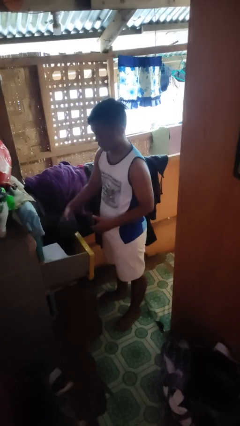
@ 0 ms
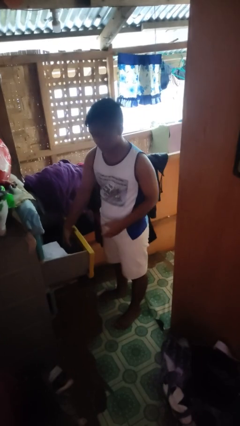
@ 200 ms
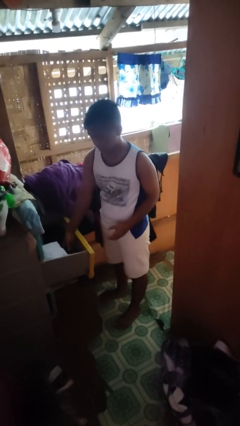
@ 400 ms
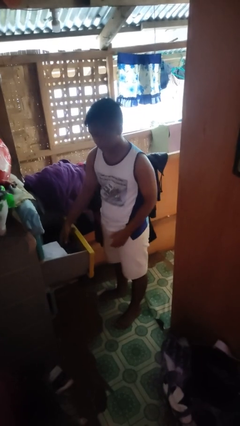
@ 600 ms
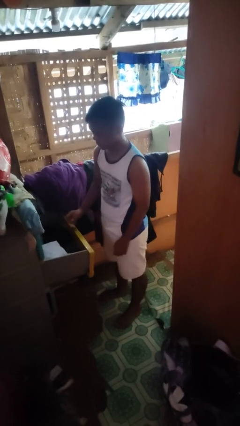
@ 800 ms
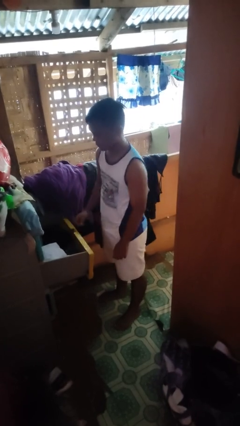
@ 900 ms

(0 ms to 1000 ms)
person puts clothes into dresser

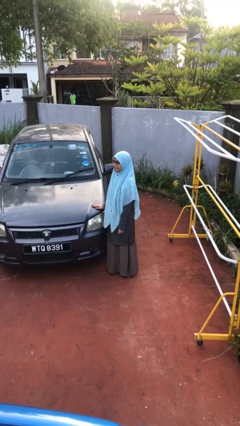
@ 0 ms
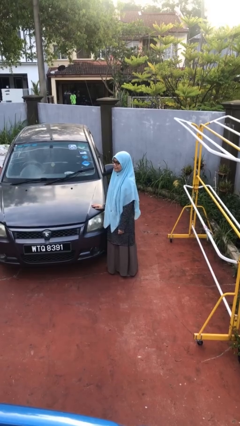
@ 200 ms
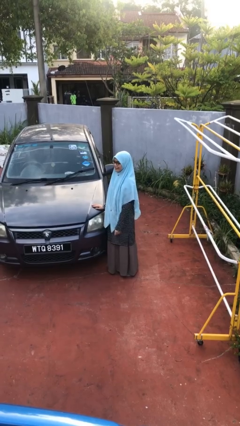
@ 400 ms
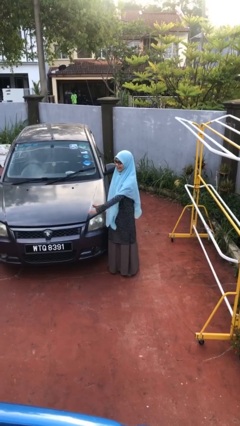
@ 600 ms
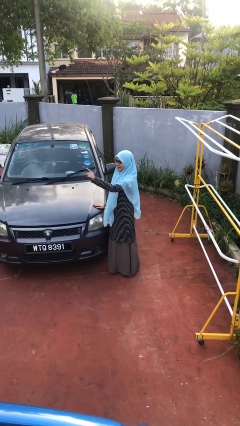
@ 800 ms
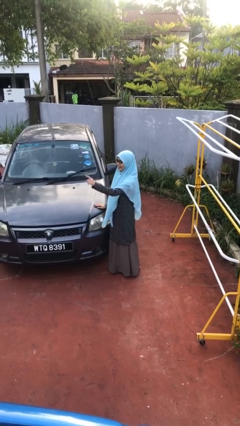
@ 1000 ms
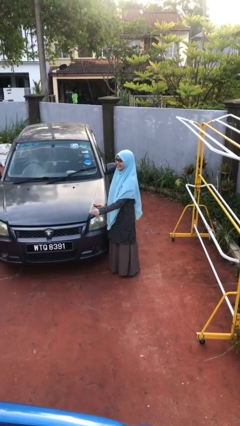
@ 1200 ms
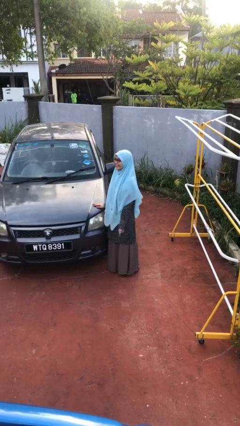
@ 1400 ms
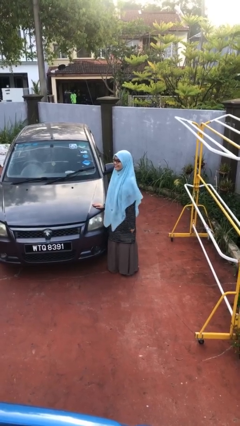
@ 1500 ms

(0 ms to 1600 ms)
person points at person

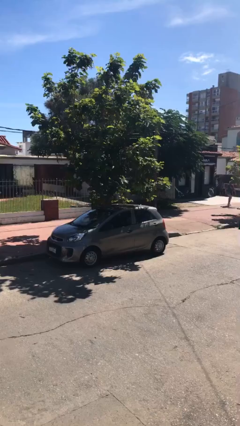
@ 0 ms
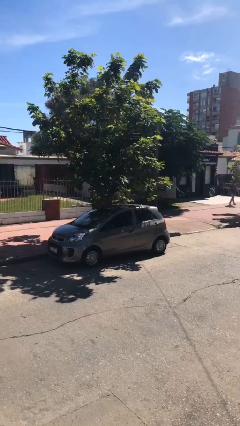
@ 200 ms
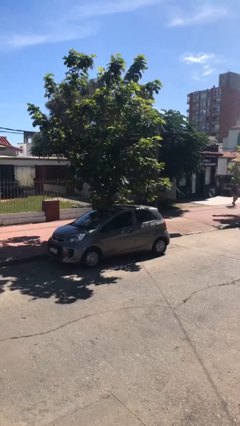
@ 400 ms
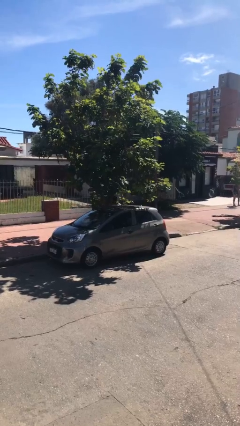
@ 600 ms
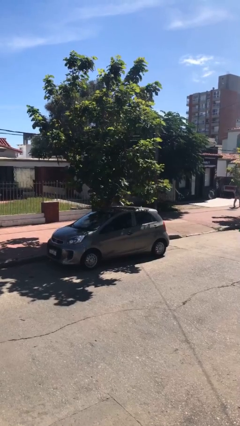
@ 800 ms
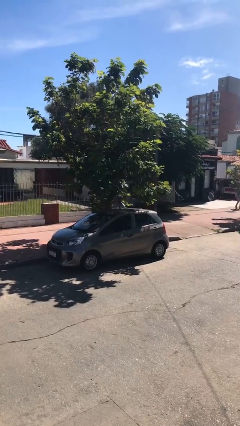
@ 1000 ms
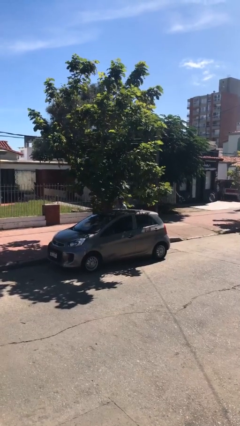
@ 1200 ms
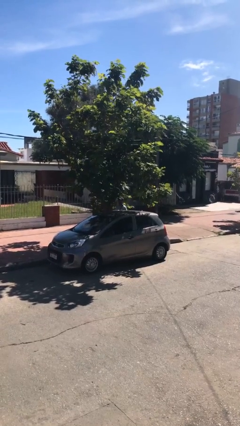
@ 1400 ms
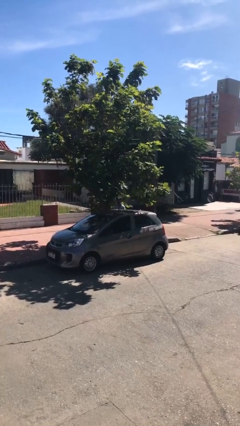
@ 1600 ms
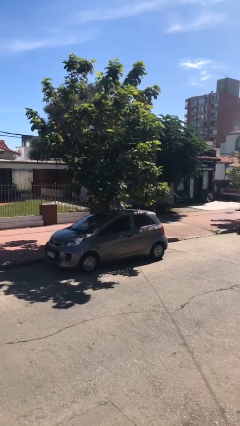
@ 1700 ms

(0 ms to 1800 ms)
person exits car

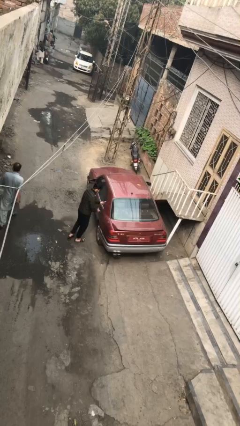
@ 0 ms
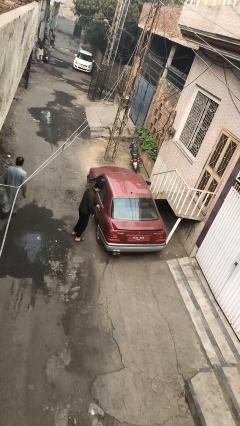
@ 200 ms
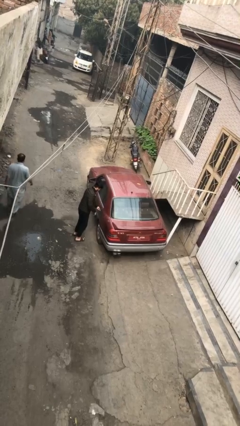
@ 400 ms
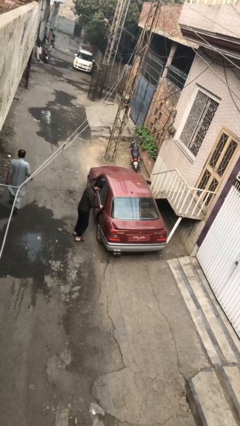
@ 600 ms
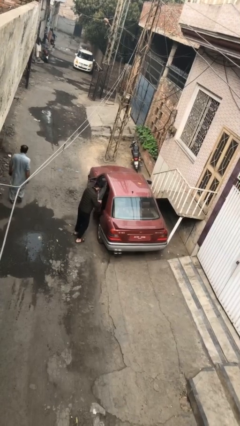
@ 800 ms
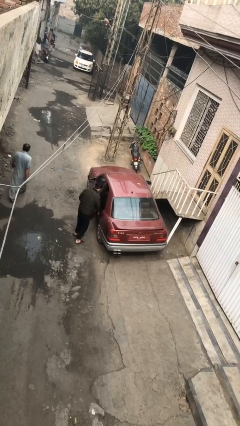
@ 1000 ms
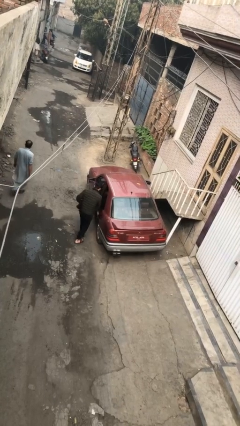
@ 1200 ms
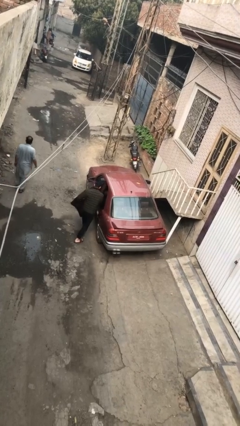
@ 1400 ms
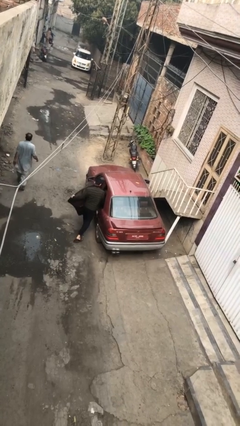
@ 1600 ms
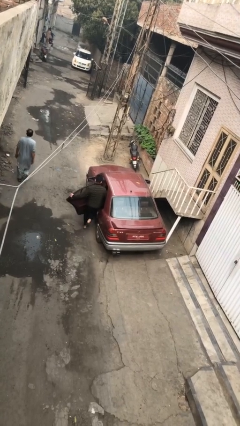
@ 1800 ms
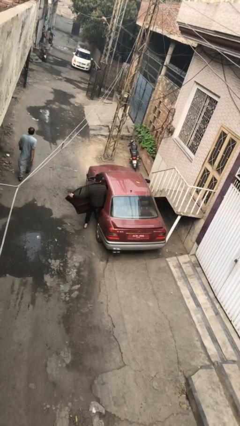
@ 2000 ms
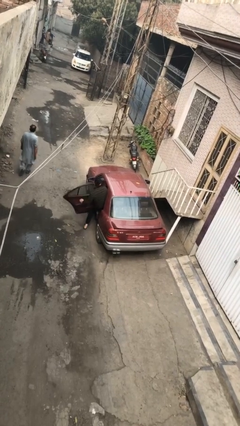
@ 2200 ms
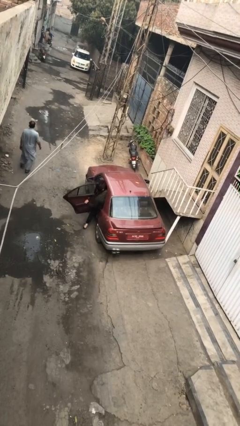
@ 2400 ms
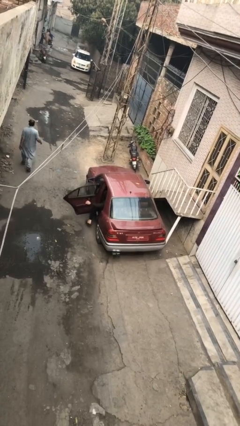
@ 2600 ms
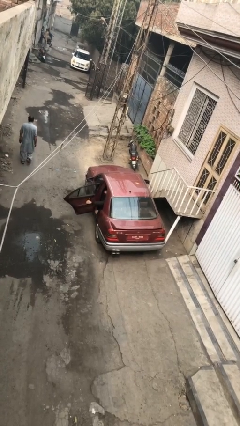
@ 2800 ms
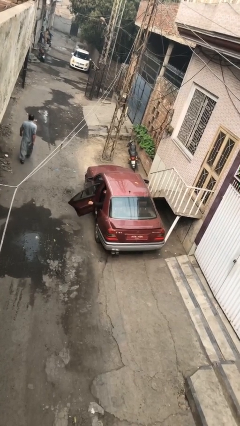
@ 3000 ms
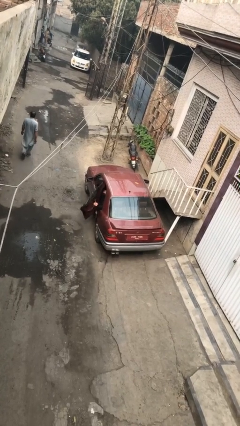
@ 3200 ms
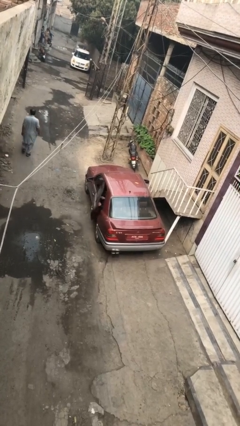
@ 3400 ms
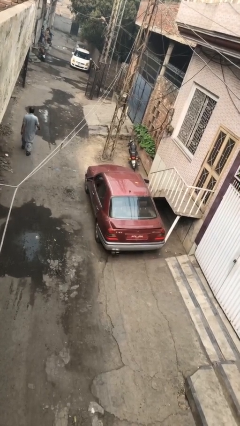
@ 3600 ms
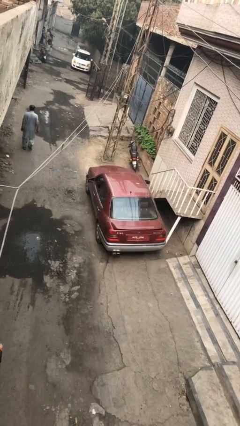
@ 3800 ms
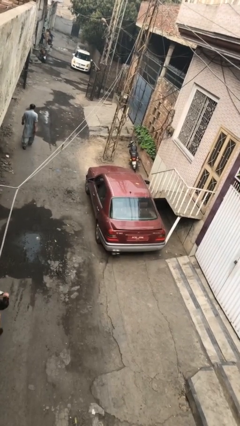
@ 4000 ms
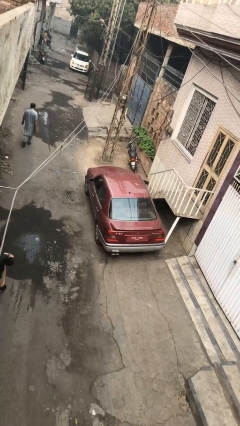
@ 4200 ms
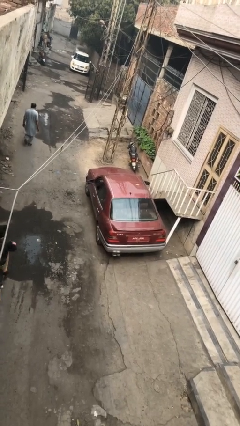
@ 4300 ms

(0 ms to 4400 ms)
car picks up person

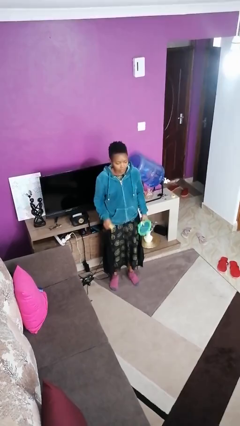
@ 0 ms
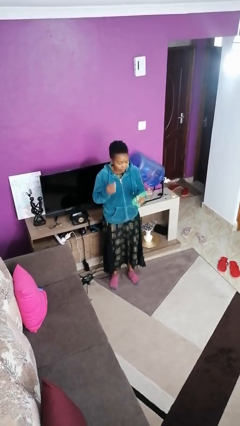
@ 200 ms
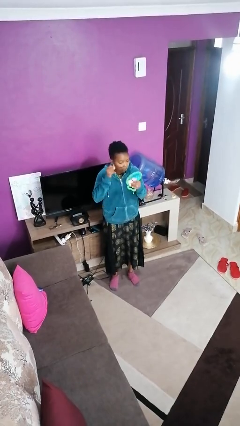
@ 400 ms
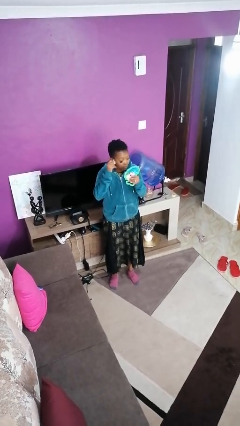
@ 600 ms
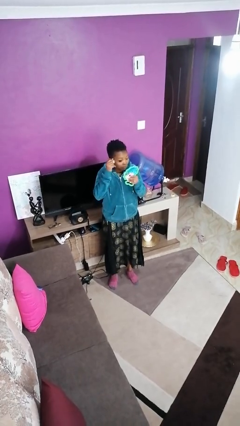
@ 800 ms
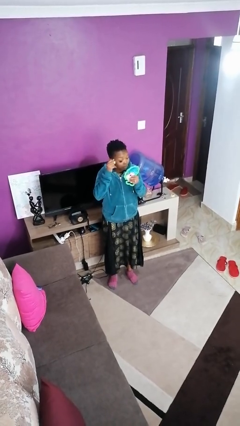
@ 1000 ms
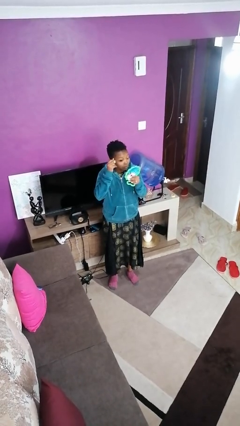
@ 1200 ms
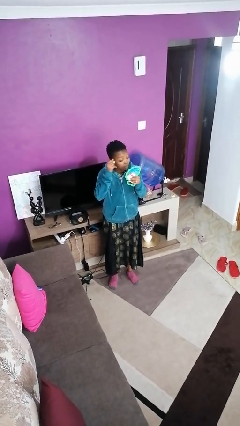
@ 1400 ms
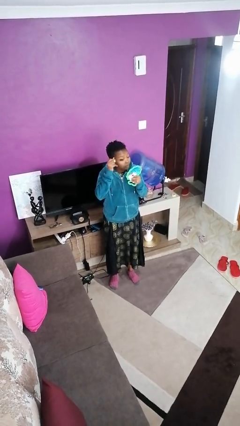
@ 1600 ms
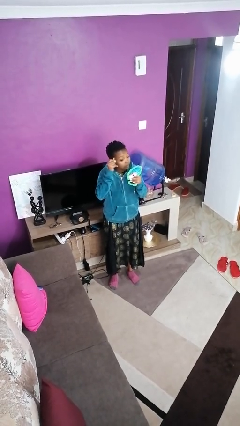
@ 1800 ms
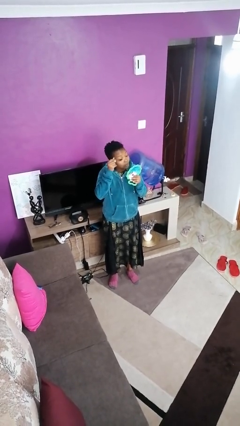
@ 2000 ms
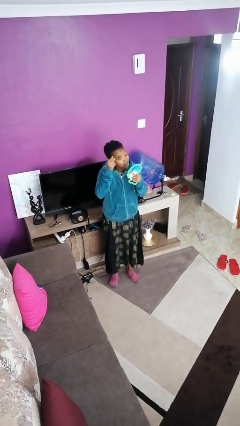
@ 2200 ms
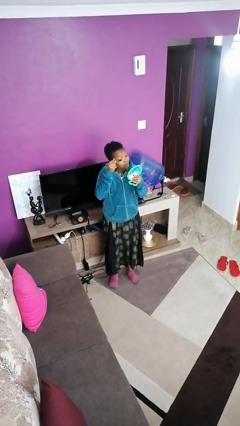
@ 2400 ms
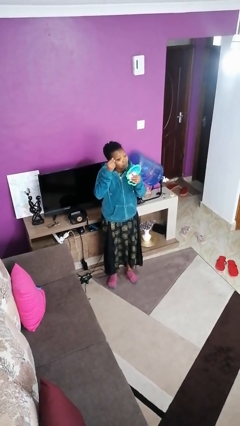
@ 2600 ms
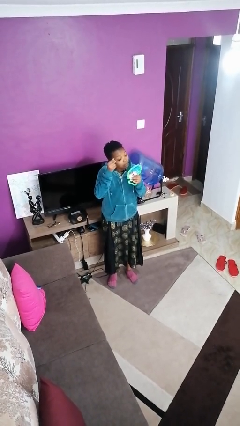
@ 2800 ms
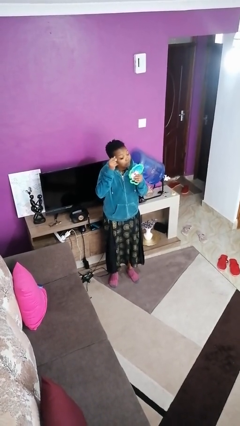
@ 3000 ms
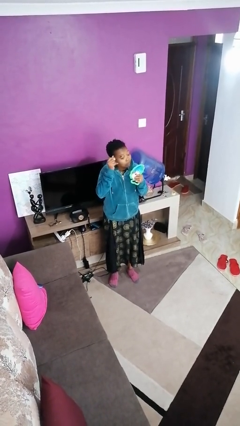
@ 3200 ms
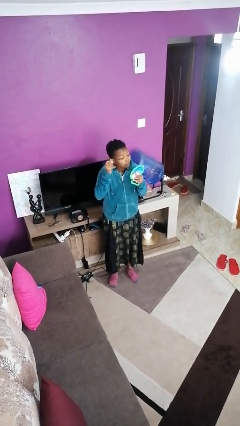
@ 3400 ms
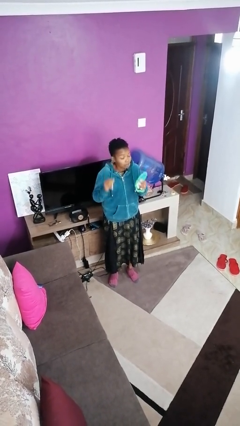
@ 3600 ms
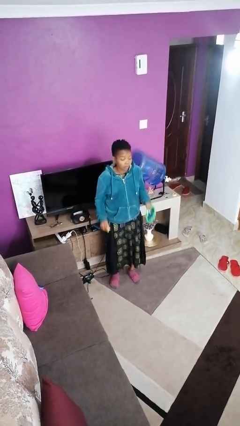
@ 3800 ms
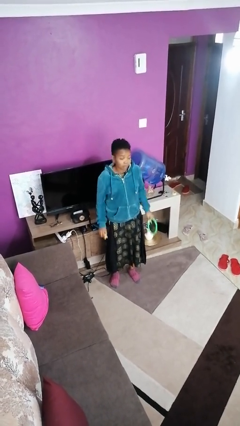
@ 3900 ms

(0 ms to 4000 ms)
person applies eye makeup

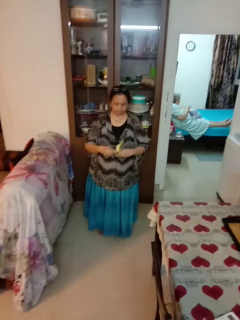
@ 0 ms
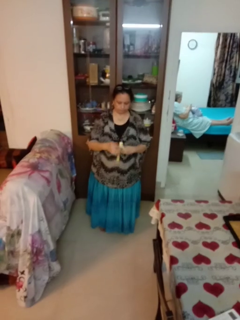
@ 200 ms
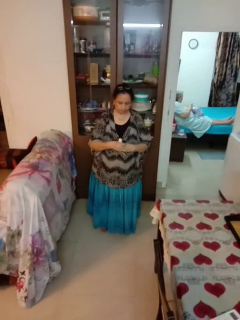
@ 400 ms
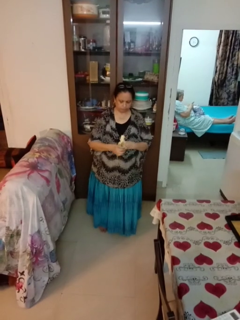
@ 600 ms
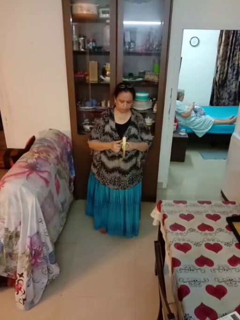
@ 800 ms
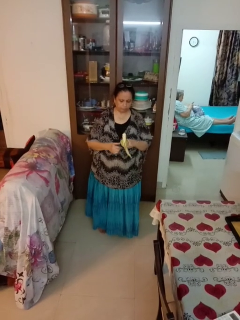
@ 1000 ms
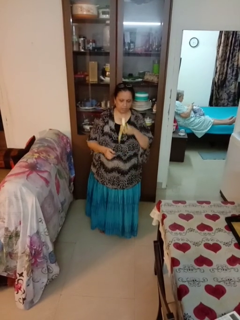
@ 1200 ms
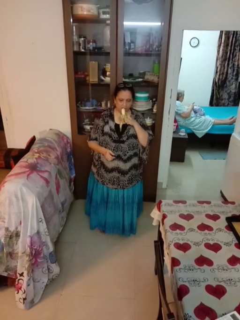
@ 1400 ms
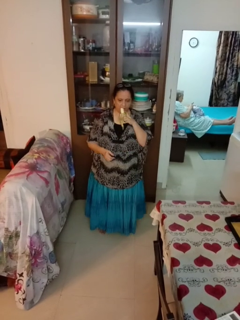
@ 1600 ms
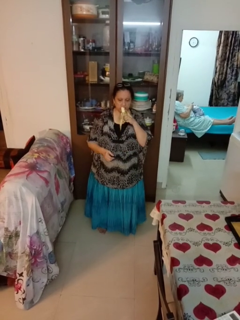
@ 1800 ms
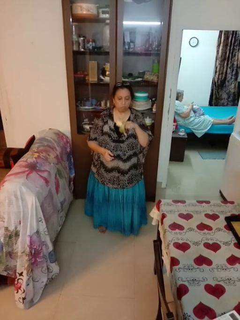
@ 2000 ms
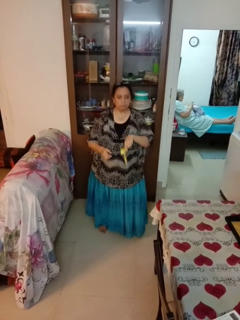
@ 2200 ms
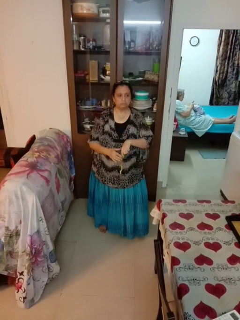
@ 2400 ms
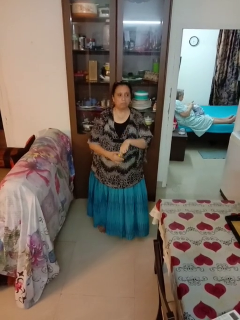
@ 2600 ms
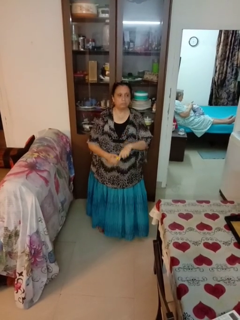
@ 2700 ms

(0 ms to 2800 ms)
person eats banana

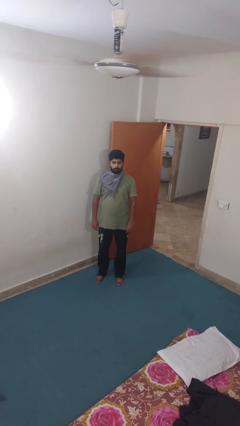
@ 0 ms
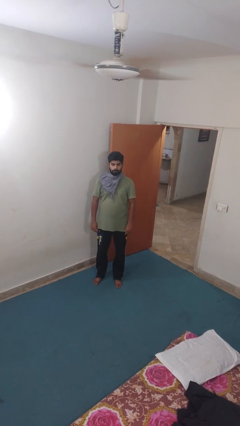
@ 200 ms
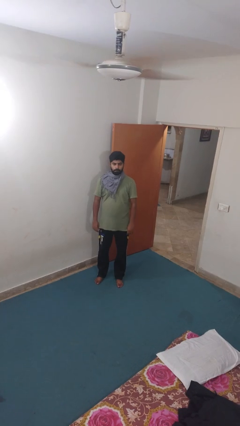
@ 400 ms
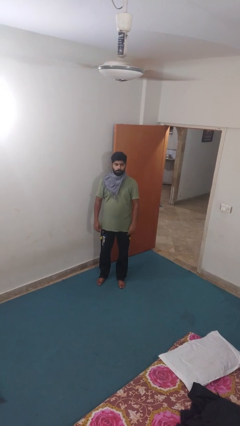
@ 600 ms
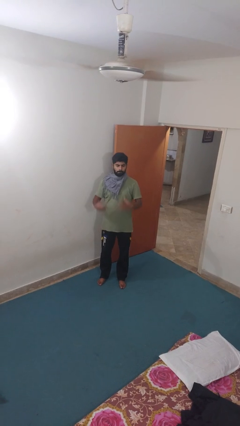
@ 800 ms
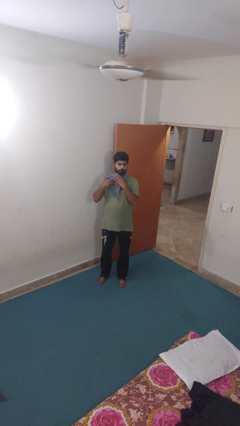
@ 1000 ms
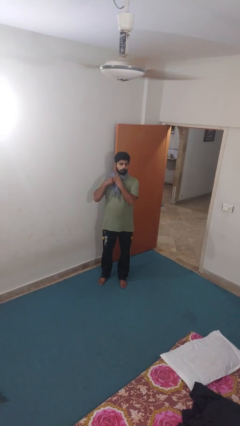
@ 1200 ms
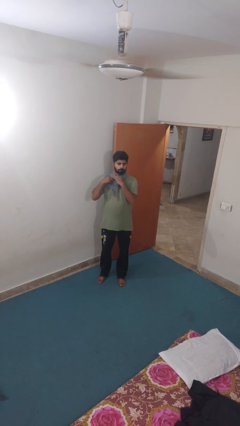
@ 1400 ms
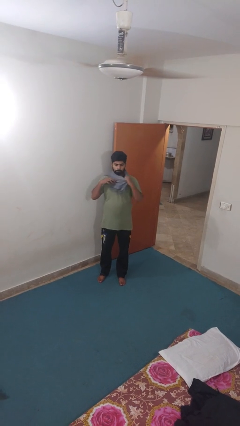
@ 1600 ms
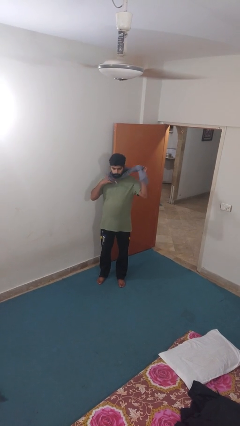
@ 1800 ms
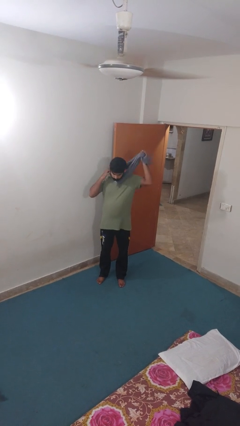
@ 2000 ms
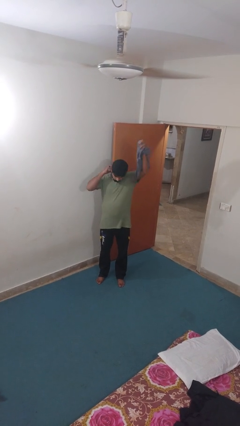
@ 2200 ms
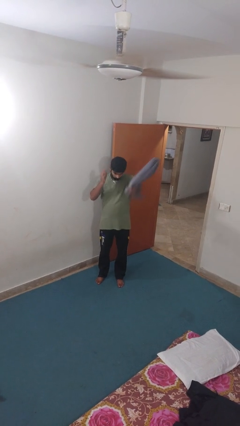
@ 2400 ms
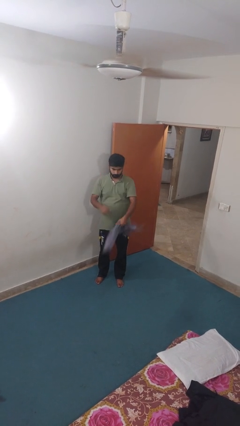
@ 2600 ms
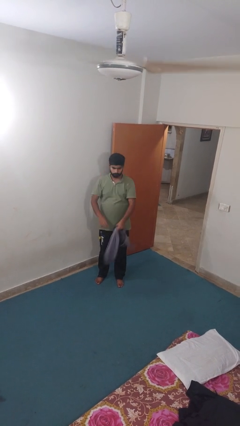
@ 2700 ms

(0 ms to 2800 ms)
person takes off scarf
